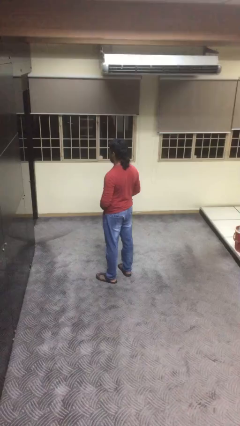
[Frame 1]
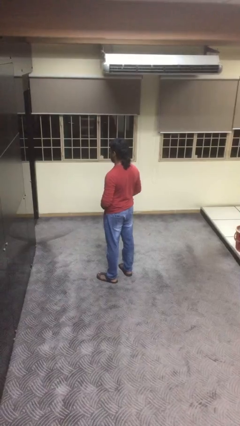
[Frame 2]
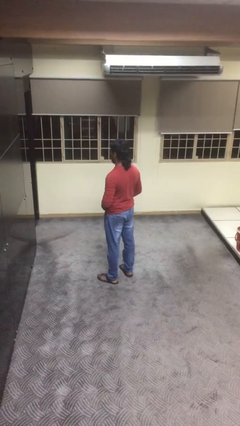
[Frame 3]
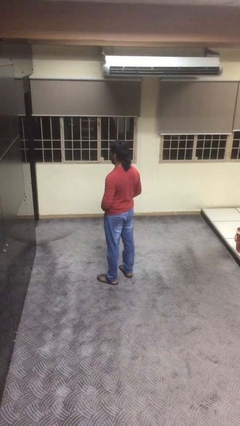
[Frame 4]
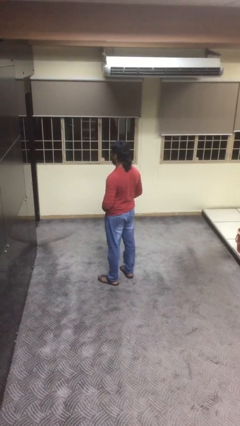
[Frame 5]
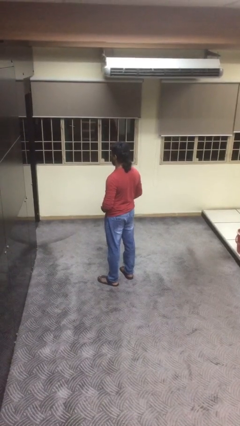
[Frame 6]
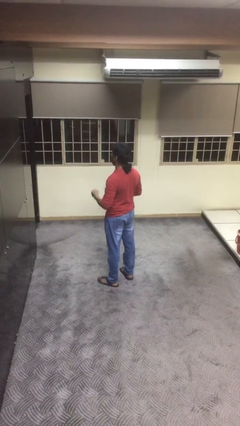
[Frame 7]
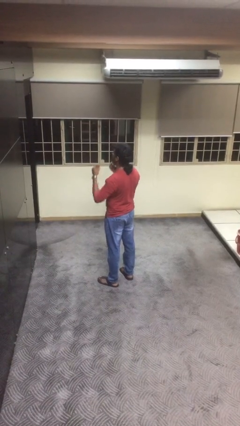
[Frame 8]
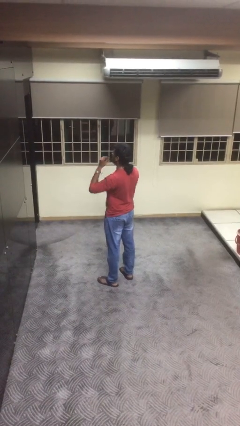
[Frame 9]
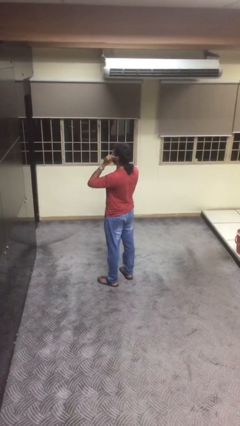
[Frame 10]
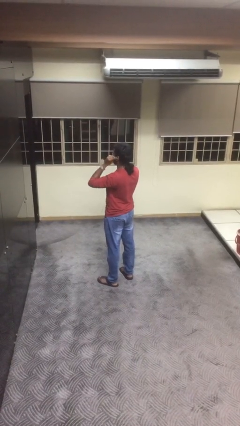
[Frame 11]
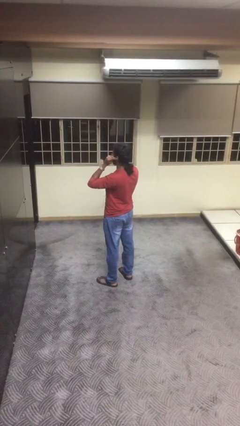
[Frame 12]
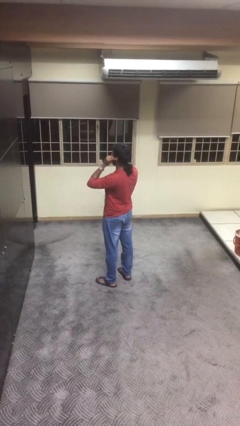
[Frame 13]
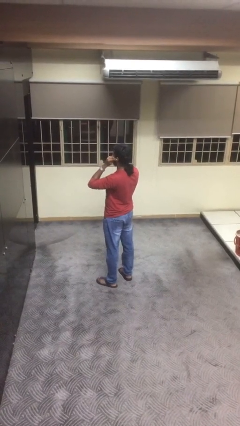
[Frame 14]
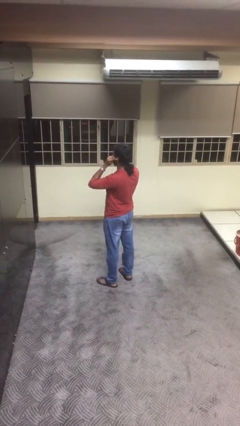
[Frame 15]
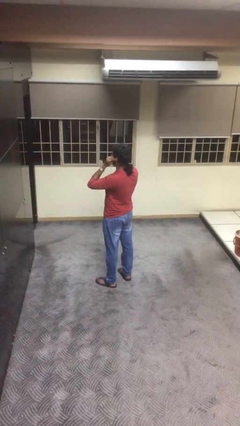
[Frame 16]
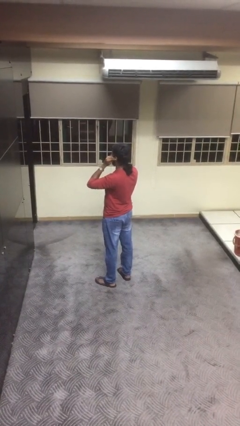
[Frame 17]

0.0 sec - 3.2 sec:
person puts on headphones

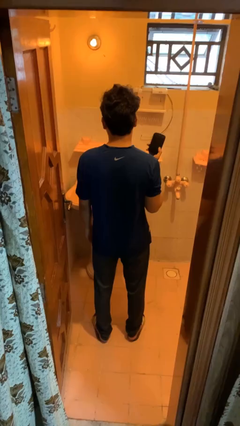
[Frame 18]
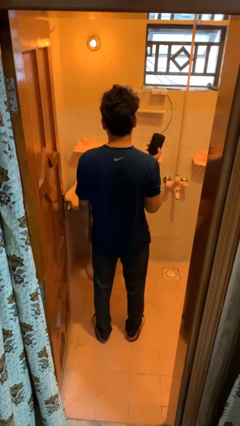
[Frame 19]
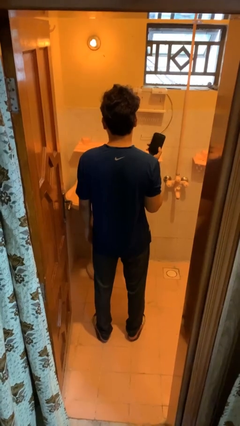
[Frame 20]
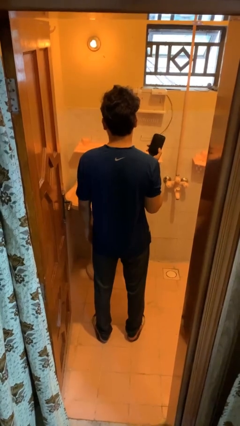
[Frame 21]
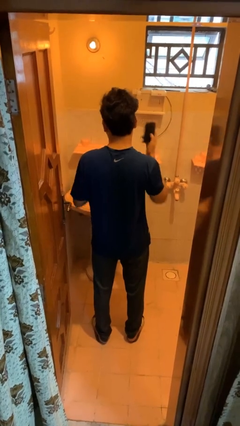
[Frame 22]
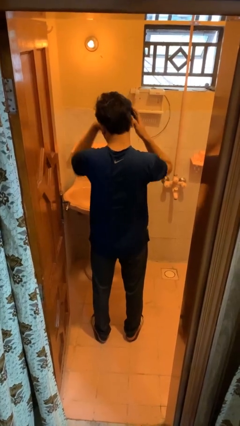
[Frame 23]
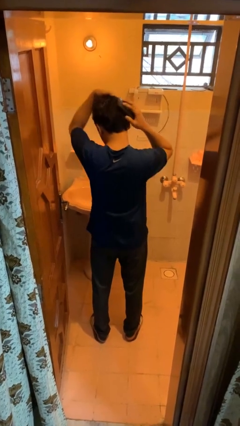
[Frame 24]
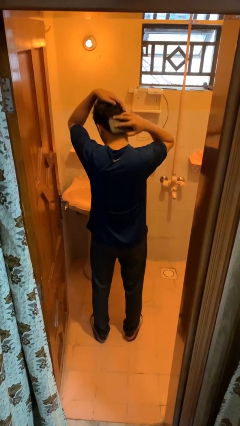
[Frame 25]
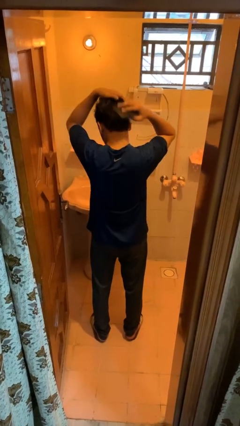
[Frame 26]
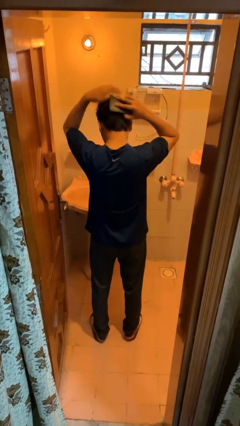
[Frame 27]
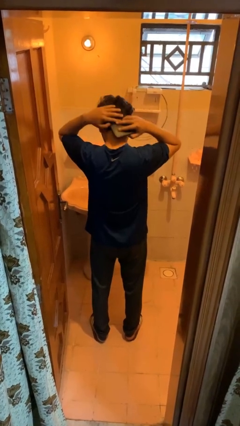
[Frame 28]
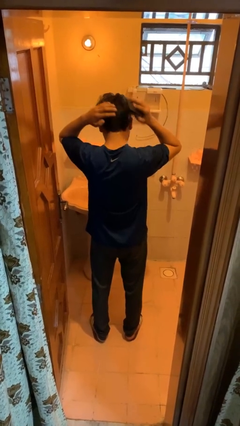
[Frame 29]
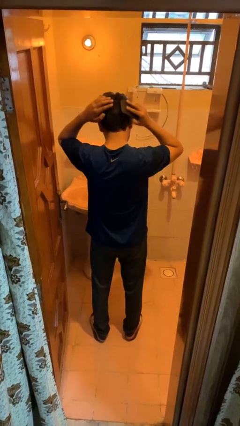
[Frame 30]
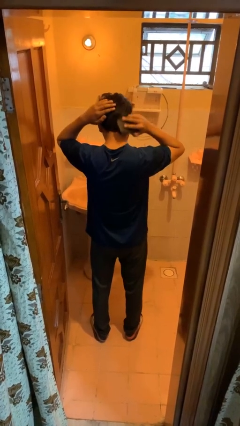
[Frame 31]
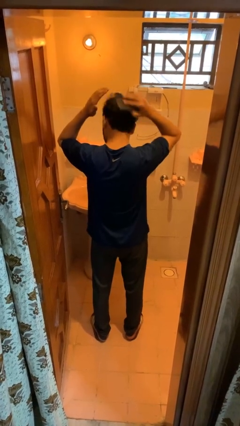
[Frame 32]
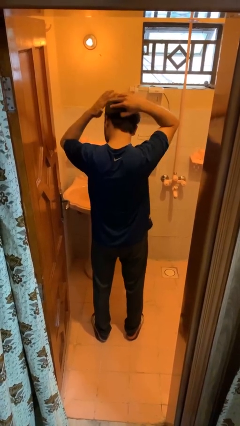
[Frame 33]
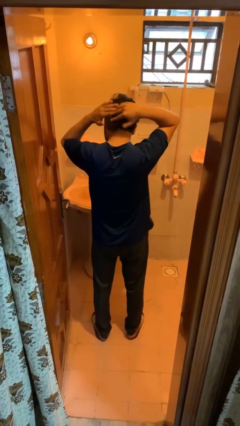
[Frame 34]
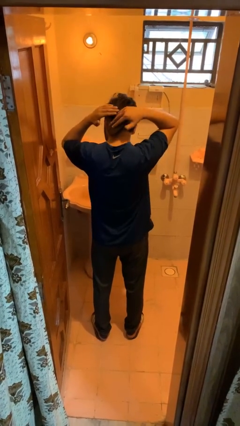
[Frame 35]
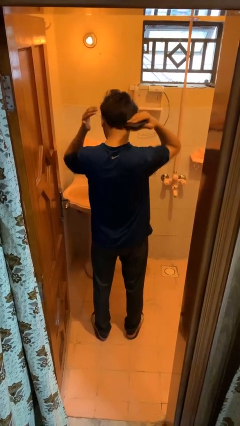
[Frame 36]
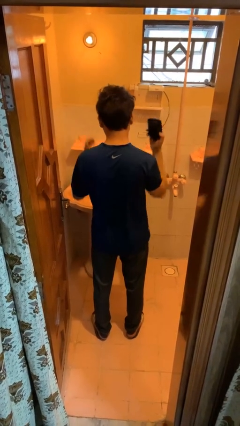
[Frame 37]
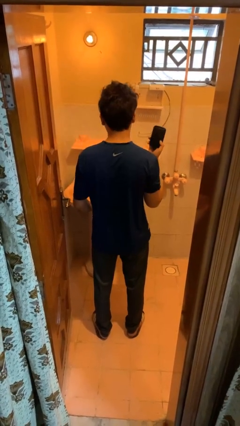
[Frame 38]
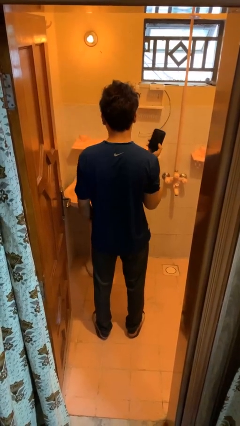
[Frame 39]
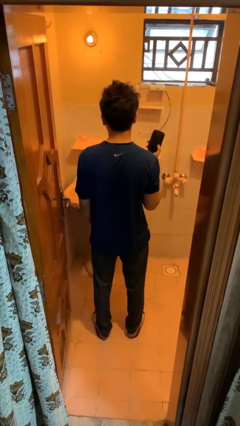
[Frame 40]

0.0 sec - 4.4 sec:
person brushes hair

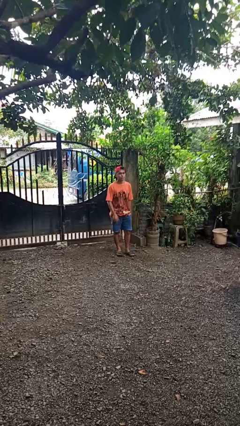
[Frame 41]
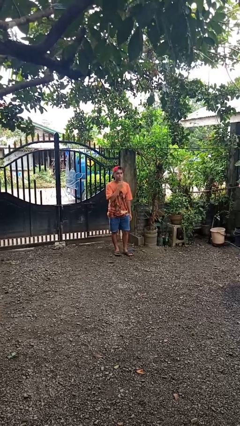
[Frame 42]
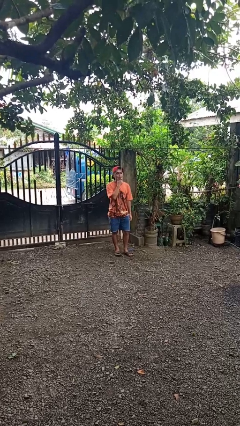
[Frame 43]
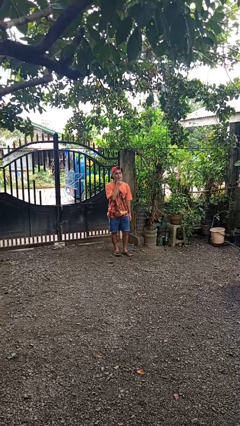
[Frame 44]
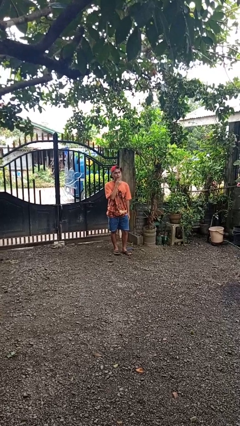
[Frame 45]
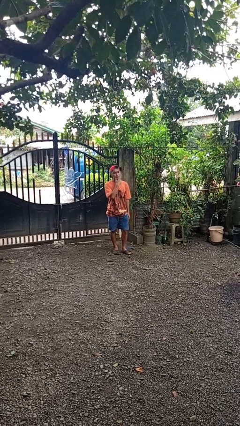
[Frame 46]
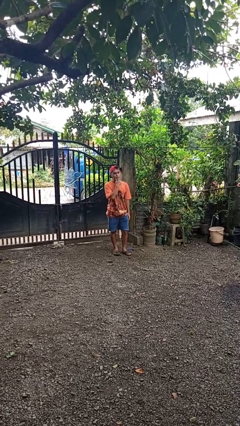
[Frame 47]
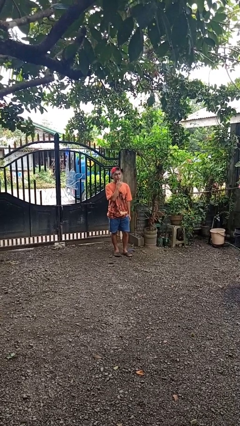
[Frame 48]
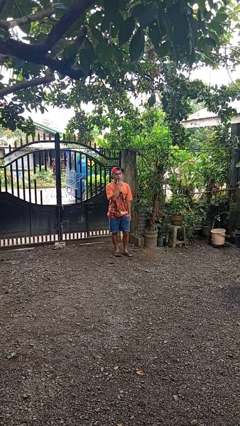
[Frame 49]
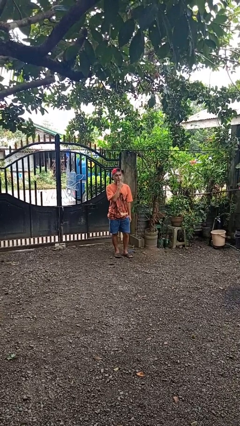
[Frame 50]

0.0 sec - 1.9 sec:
person strokes chin

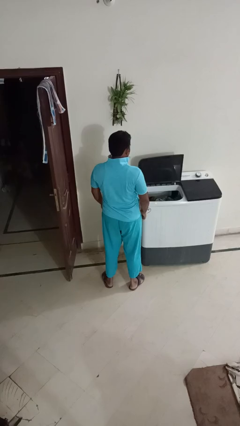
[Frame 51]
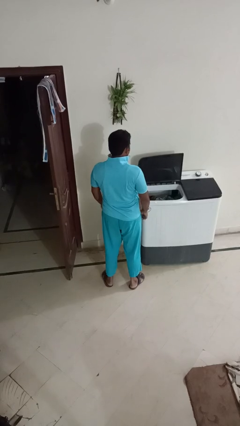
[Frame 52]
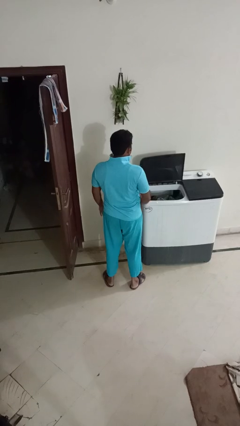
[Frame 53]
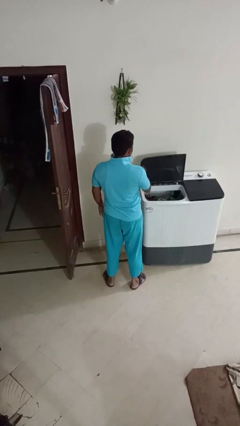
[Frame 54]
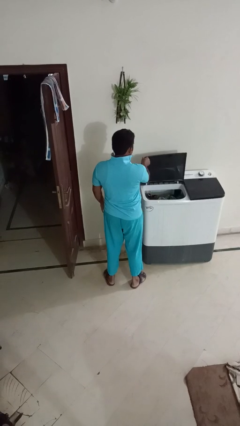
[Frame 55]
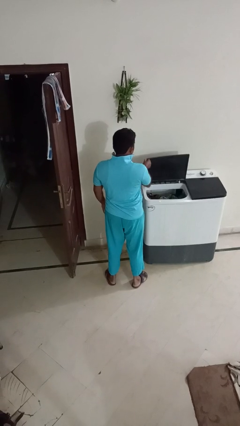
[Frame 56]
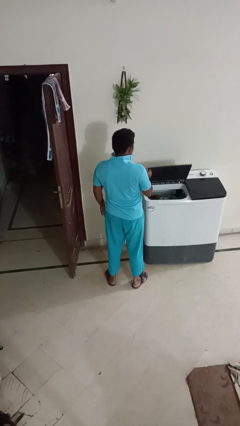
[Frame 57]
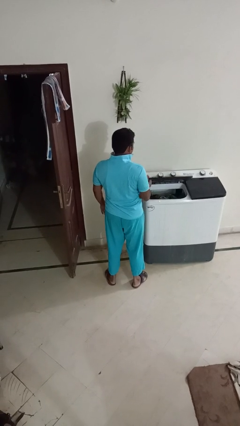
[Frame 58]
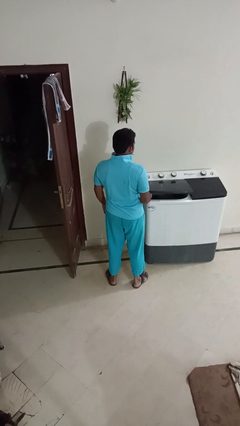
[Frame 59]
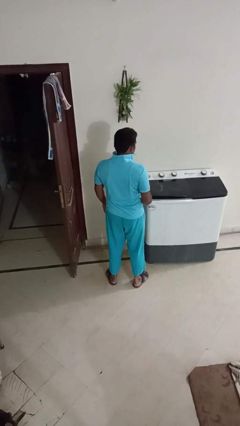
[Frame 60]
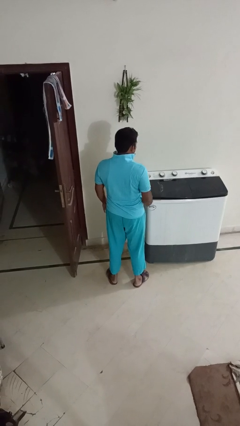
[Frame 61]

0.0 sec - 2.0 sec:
person closes clothes washer

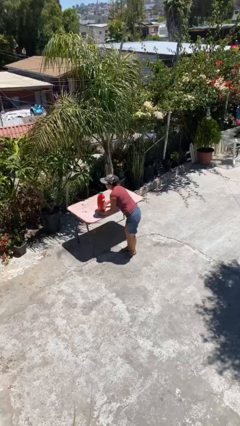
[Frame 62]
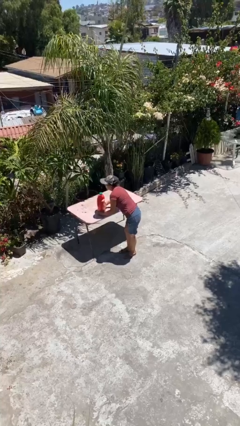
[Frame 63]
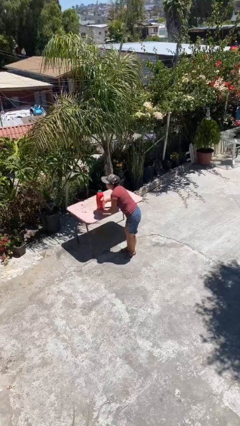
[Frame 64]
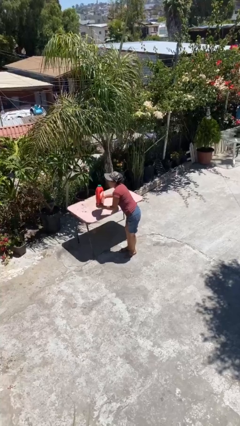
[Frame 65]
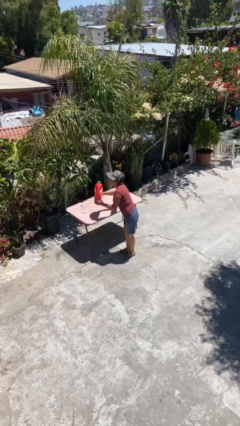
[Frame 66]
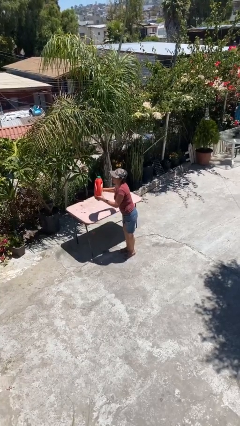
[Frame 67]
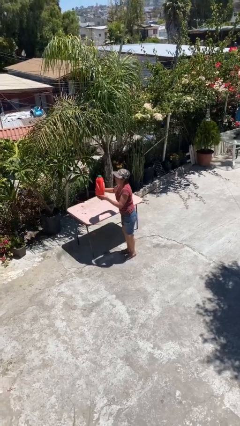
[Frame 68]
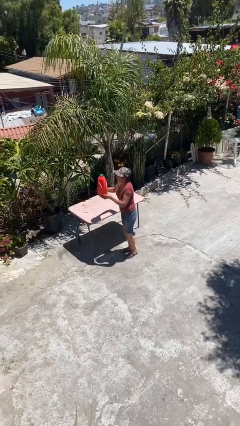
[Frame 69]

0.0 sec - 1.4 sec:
person picks up object from table

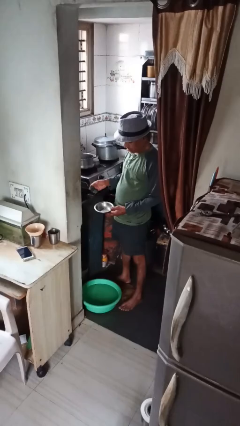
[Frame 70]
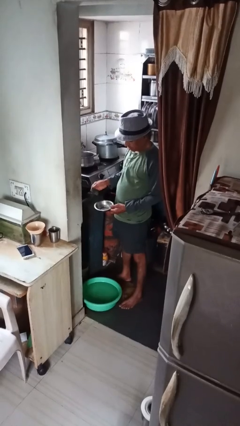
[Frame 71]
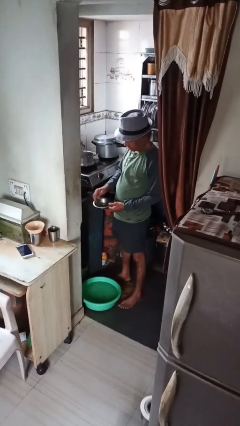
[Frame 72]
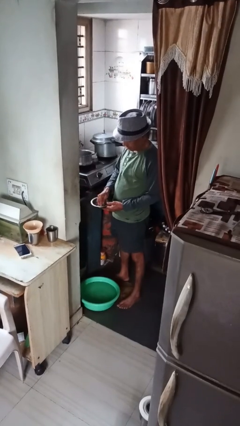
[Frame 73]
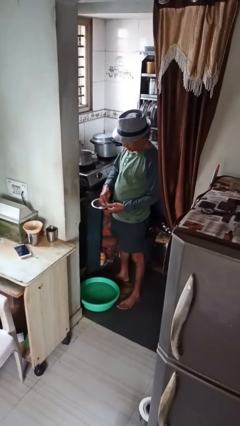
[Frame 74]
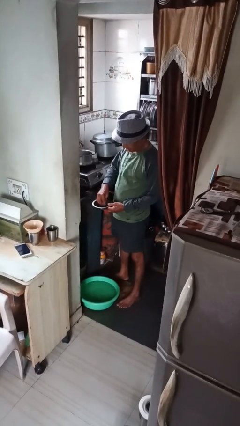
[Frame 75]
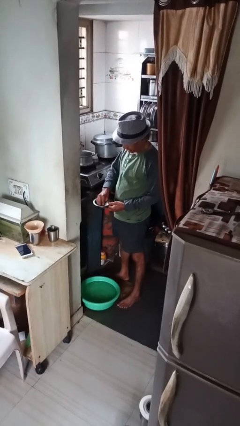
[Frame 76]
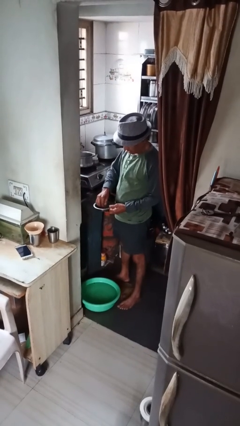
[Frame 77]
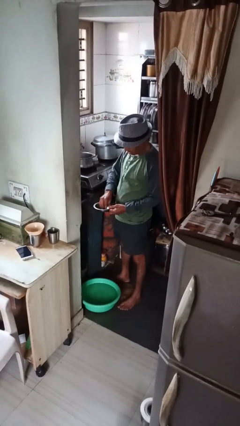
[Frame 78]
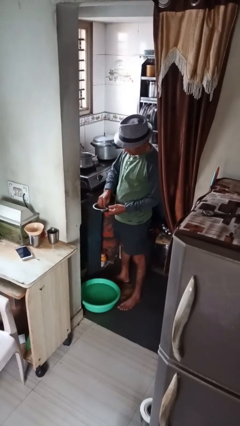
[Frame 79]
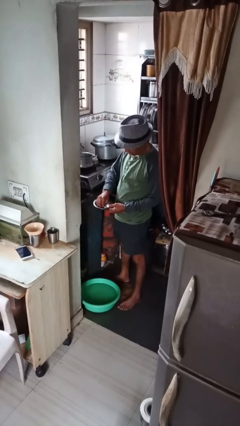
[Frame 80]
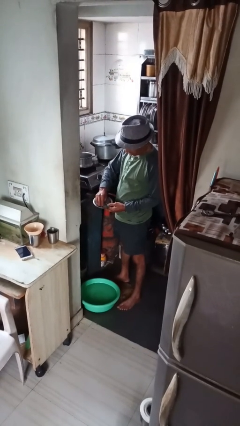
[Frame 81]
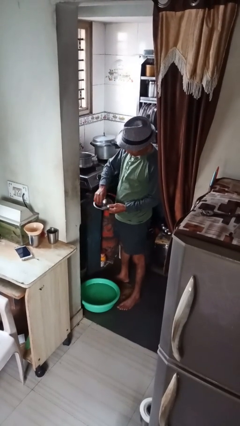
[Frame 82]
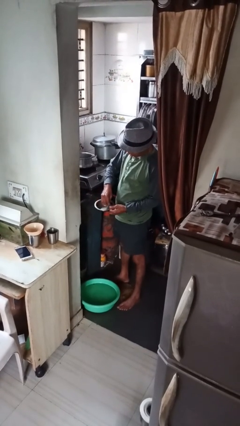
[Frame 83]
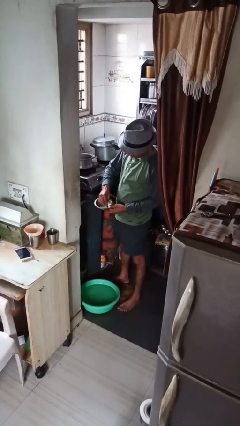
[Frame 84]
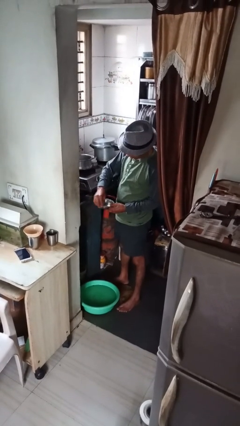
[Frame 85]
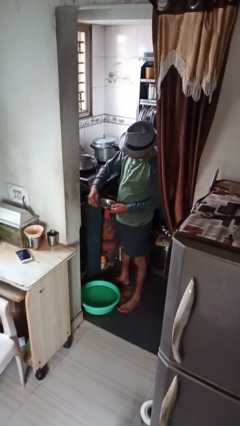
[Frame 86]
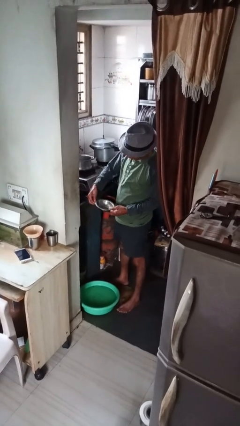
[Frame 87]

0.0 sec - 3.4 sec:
person washes dish

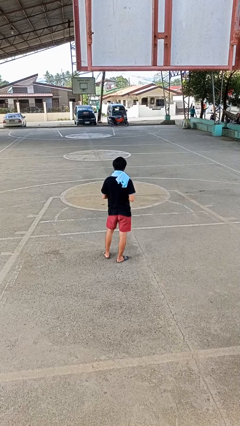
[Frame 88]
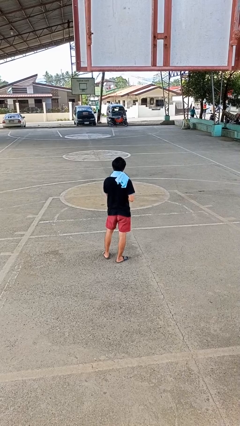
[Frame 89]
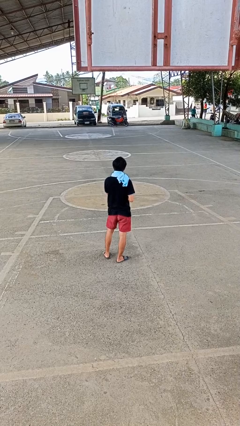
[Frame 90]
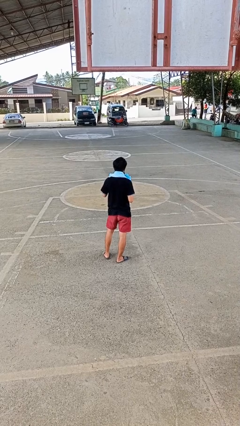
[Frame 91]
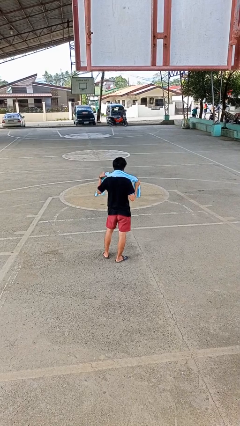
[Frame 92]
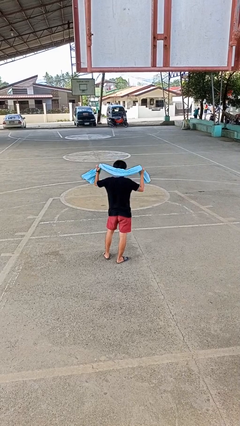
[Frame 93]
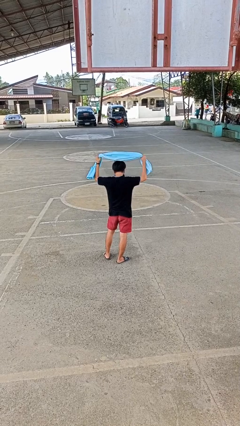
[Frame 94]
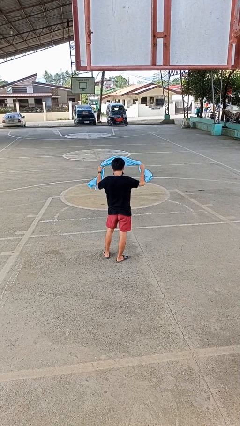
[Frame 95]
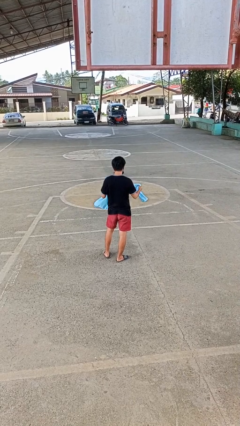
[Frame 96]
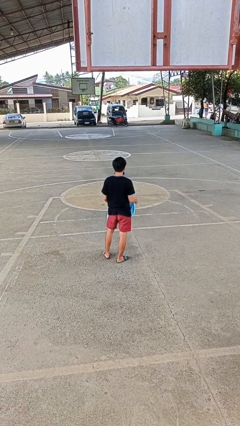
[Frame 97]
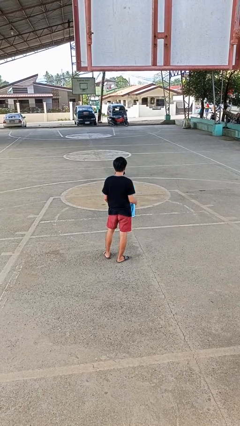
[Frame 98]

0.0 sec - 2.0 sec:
person takes off scarf
